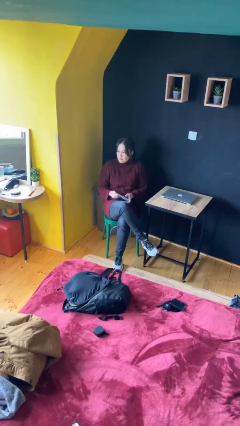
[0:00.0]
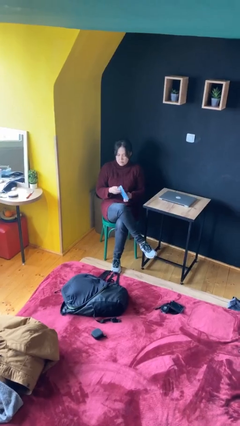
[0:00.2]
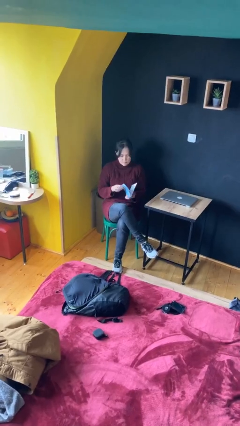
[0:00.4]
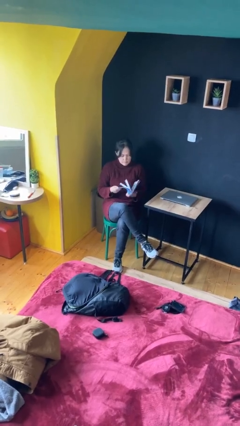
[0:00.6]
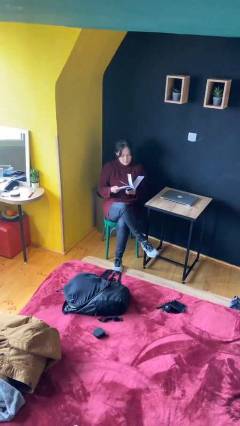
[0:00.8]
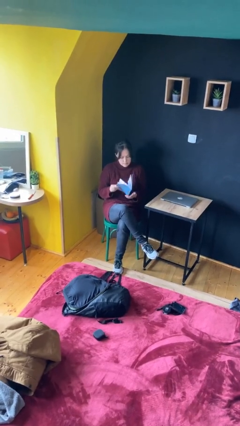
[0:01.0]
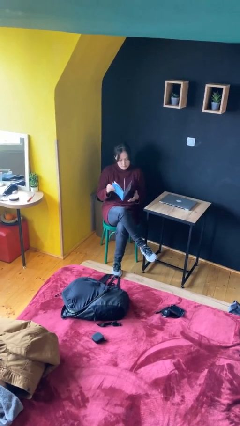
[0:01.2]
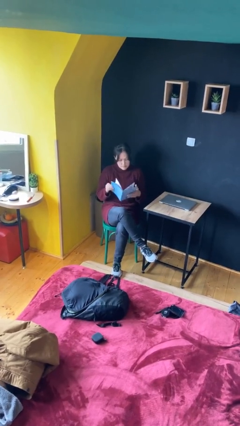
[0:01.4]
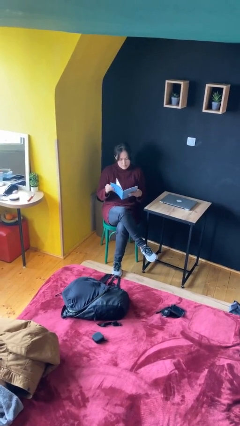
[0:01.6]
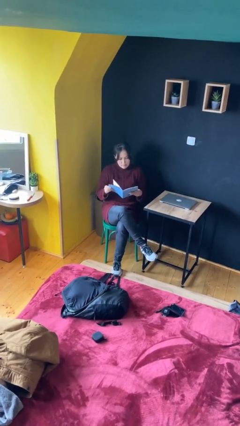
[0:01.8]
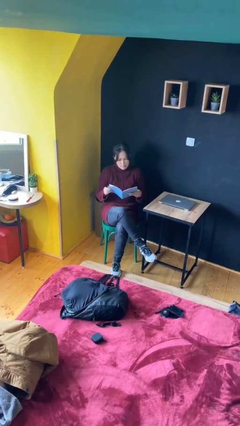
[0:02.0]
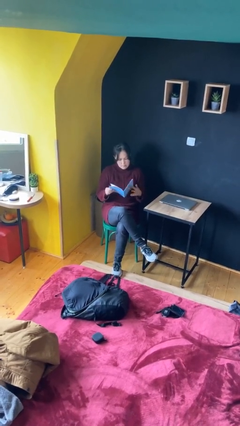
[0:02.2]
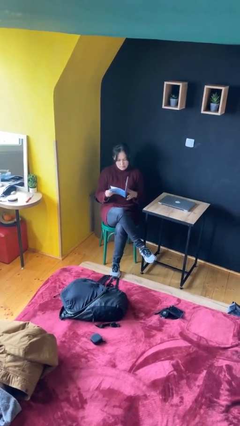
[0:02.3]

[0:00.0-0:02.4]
person reads document

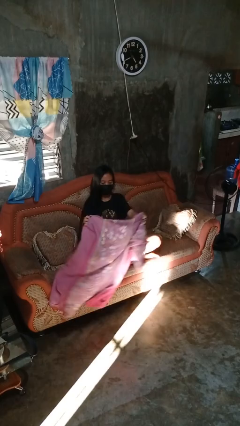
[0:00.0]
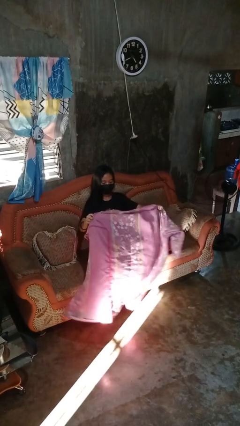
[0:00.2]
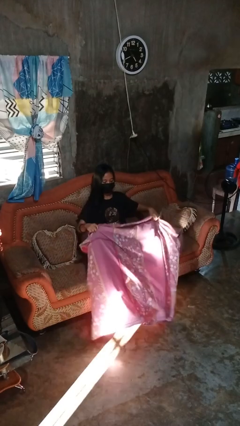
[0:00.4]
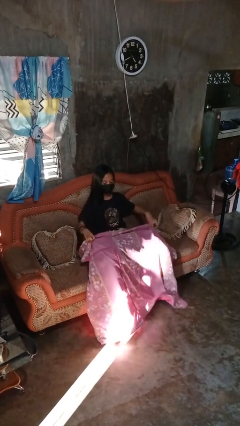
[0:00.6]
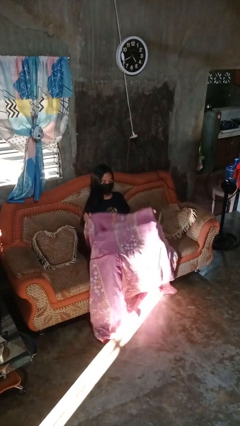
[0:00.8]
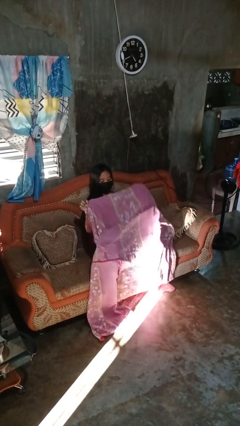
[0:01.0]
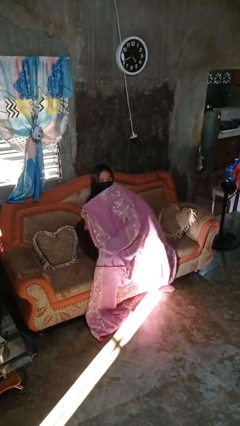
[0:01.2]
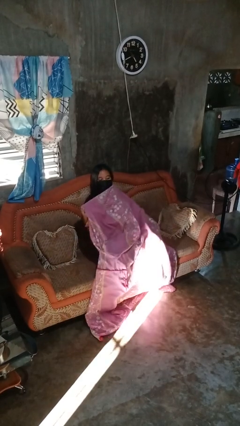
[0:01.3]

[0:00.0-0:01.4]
person covers with blanket

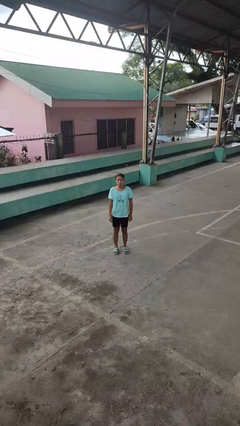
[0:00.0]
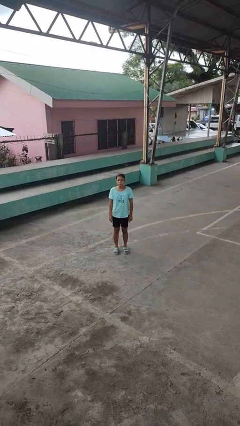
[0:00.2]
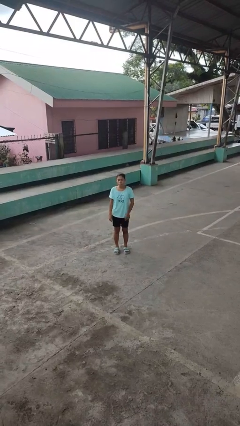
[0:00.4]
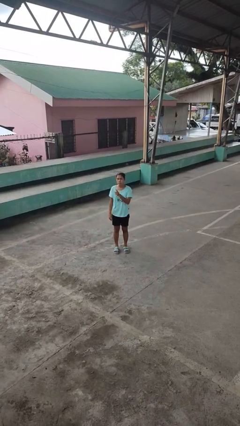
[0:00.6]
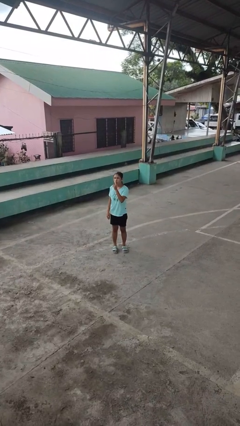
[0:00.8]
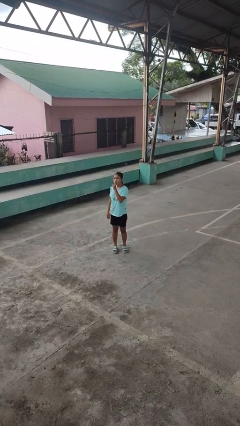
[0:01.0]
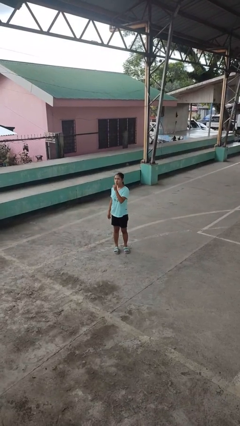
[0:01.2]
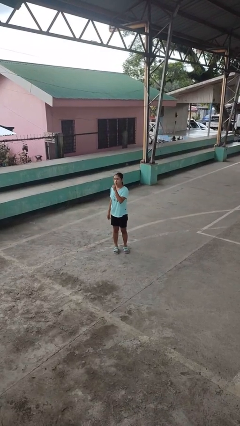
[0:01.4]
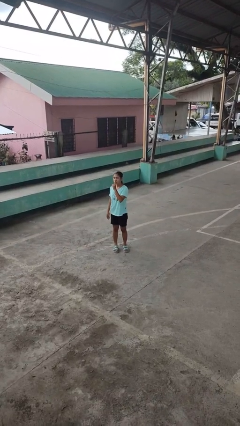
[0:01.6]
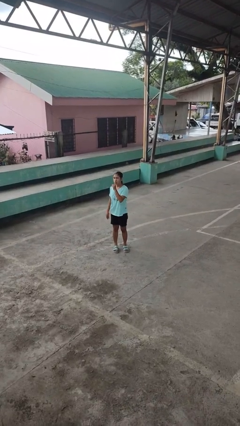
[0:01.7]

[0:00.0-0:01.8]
person gestures be quiet

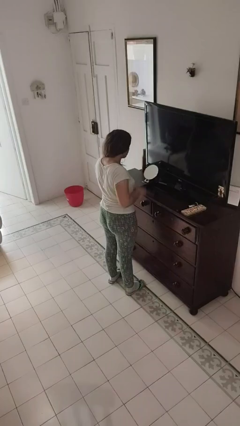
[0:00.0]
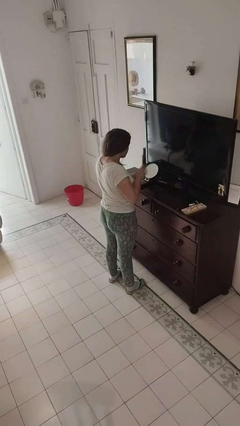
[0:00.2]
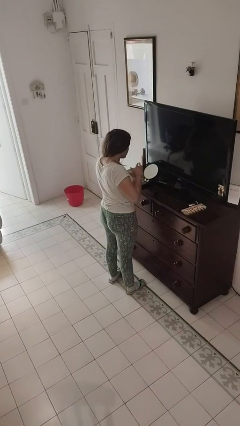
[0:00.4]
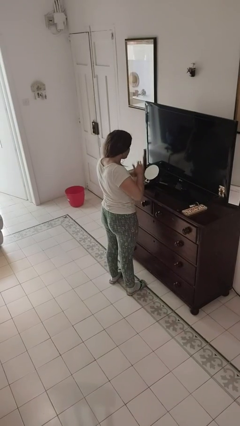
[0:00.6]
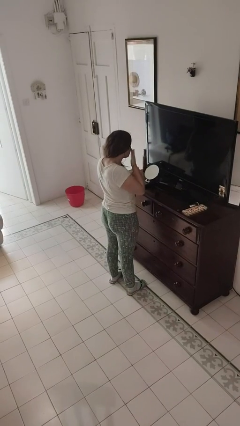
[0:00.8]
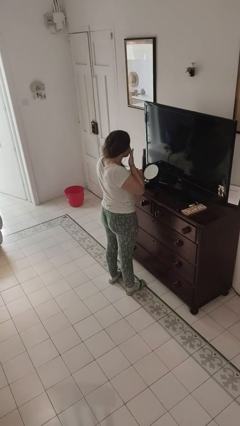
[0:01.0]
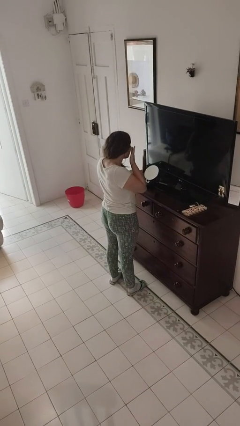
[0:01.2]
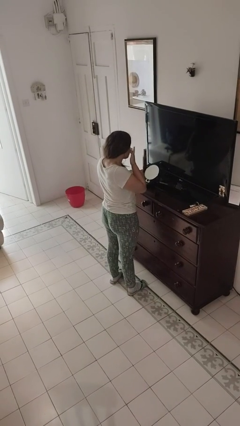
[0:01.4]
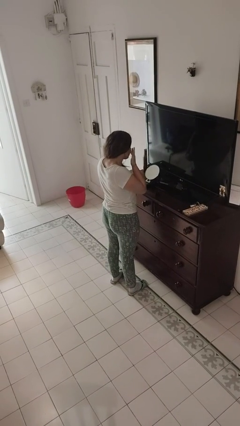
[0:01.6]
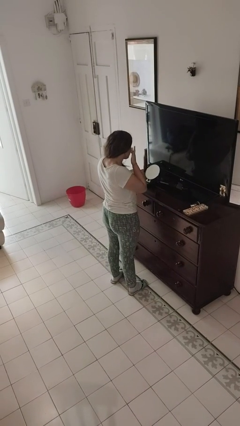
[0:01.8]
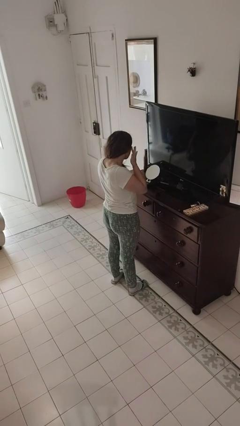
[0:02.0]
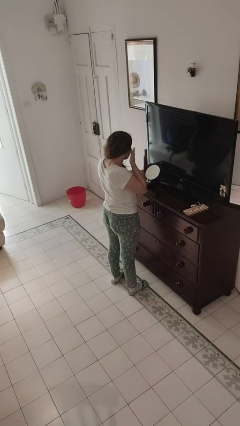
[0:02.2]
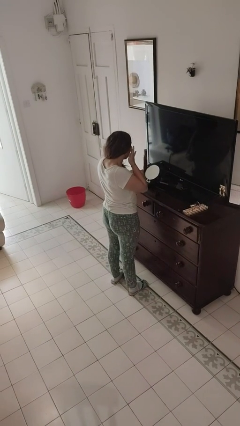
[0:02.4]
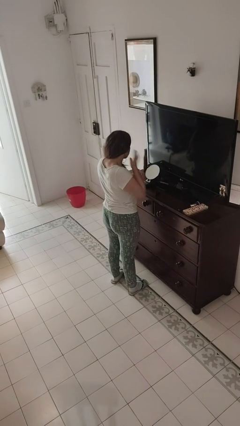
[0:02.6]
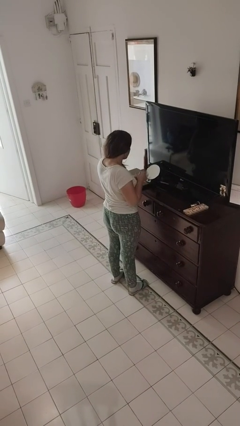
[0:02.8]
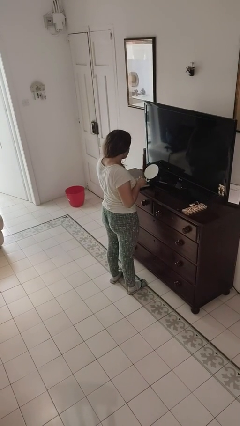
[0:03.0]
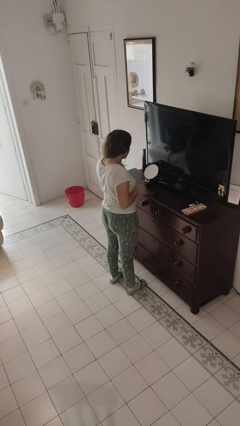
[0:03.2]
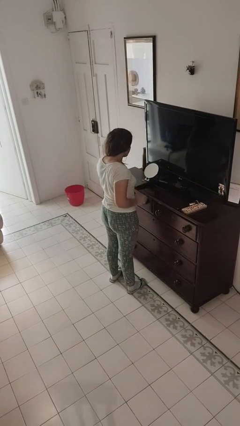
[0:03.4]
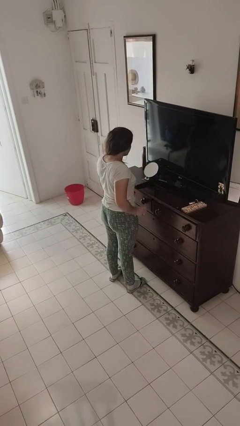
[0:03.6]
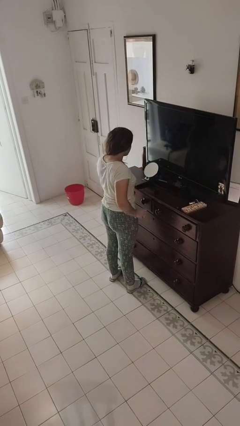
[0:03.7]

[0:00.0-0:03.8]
person applies foundation makeup

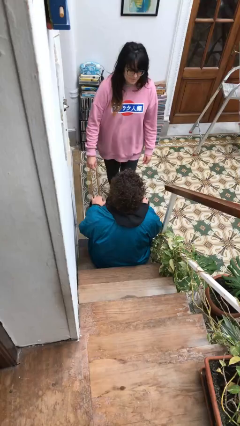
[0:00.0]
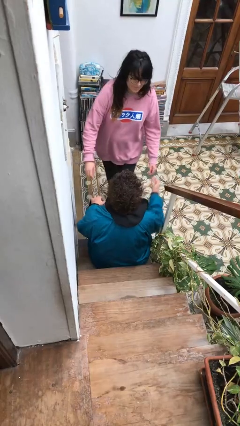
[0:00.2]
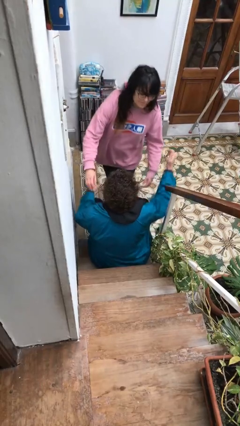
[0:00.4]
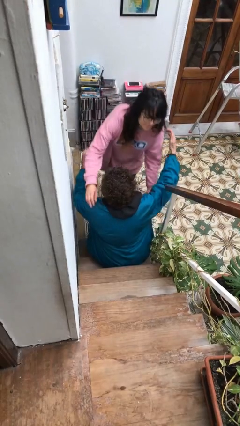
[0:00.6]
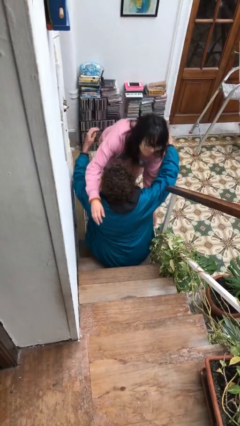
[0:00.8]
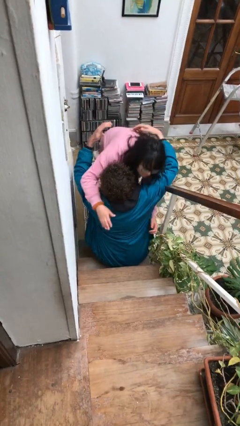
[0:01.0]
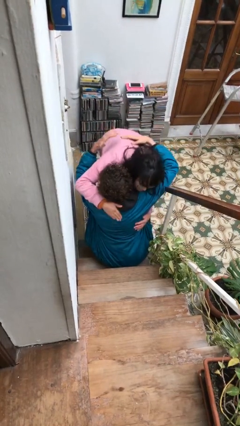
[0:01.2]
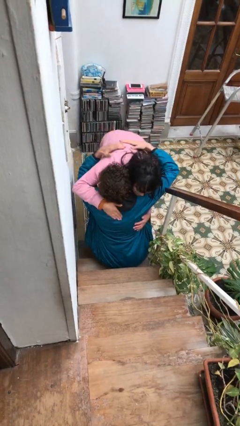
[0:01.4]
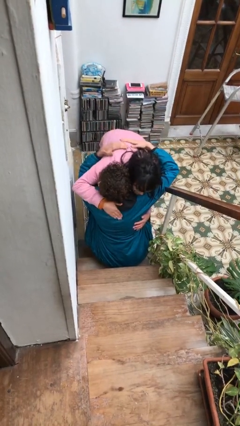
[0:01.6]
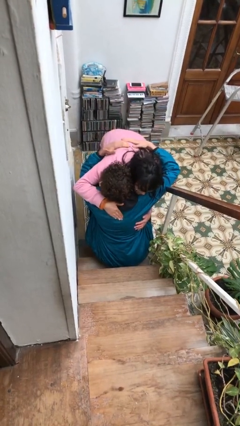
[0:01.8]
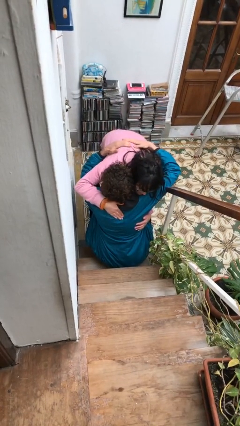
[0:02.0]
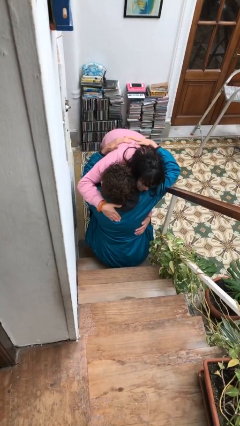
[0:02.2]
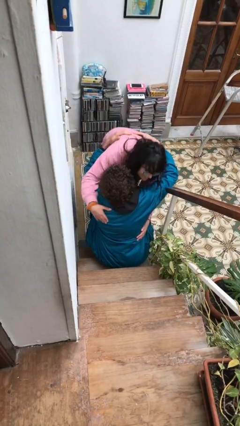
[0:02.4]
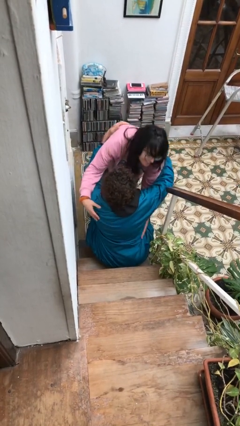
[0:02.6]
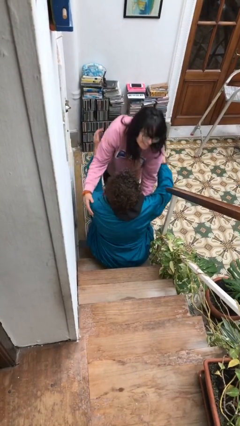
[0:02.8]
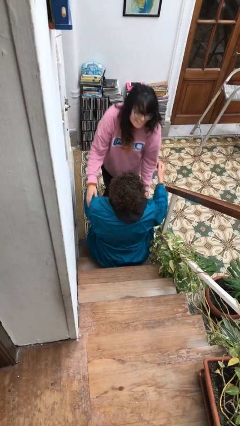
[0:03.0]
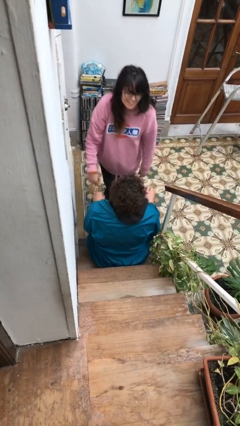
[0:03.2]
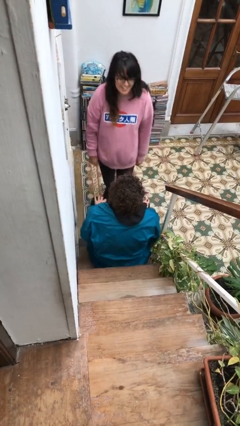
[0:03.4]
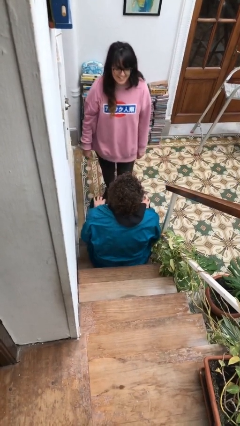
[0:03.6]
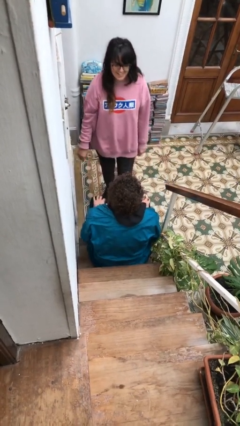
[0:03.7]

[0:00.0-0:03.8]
person embraces person

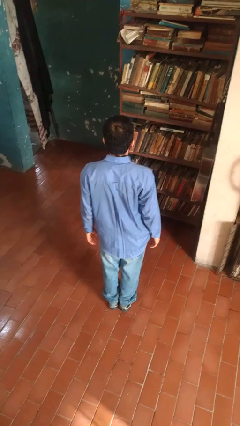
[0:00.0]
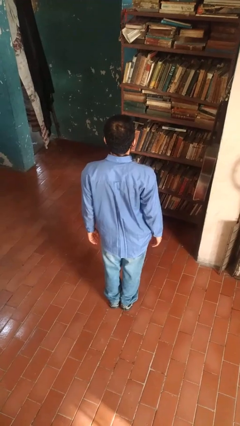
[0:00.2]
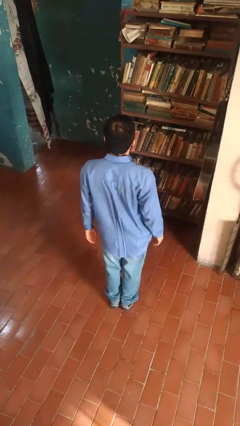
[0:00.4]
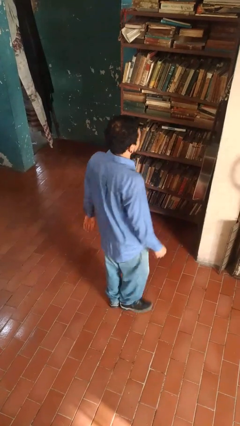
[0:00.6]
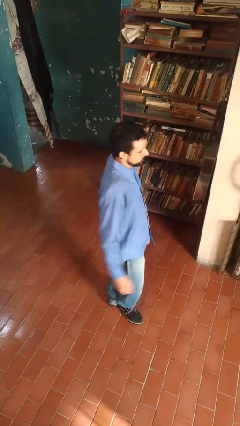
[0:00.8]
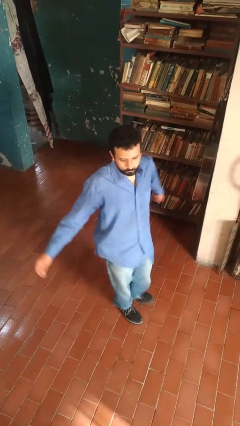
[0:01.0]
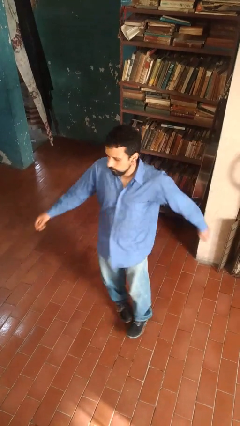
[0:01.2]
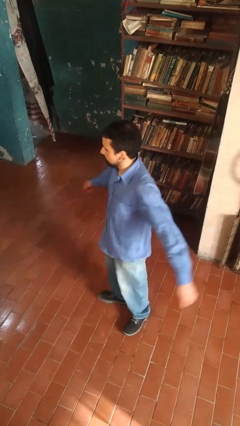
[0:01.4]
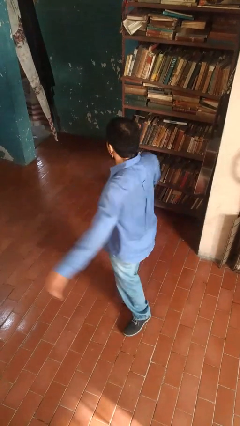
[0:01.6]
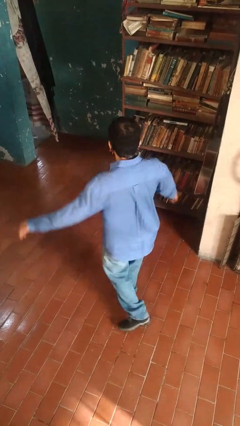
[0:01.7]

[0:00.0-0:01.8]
person twirls

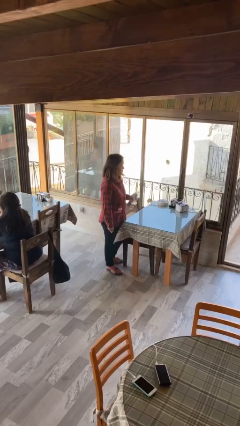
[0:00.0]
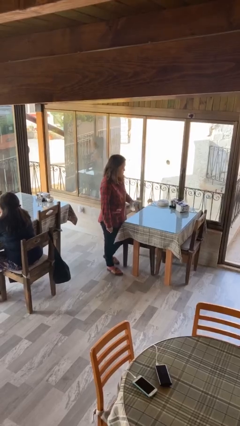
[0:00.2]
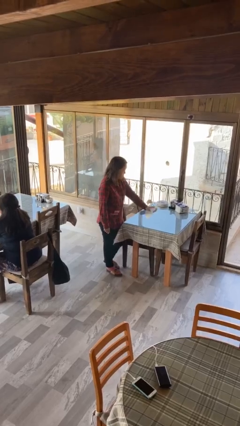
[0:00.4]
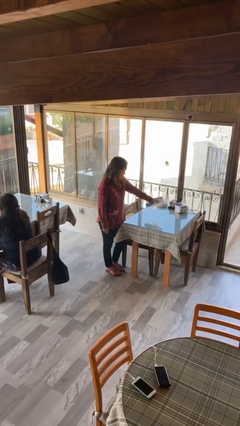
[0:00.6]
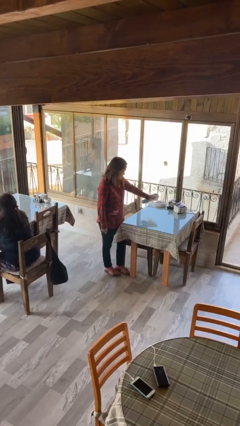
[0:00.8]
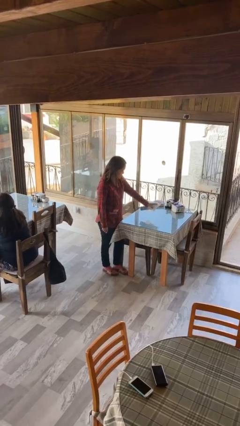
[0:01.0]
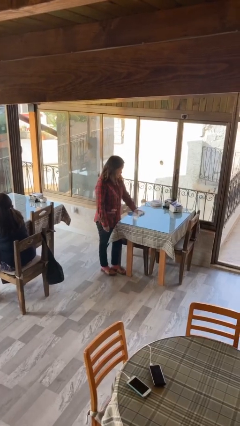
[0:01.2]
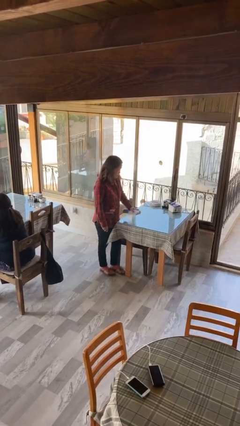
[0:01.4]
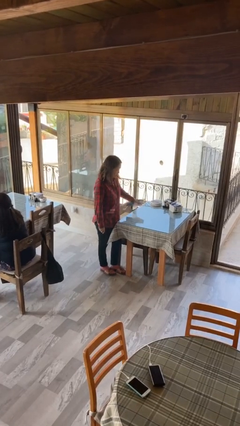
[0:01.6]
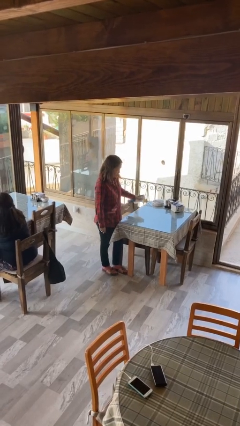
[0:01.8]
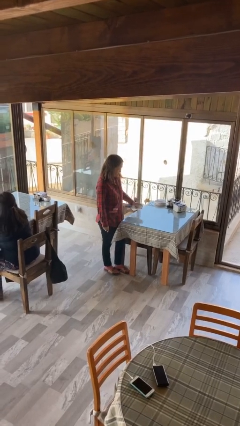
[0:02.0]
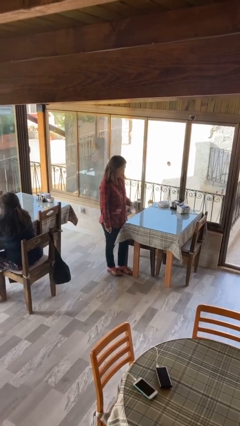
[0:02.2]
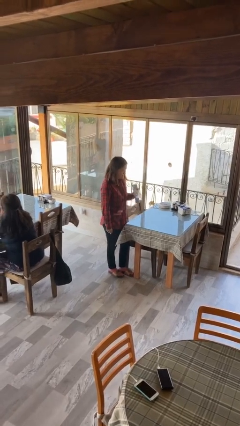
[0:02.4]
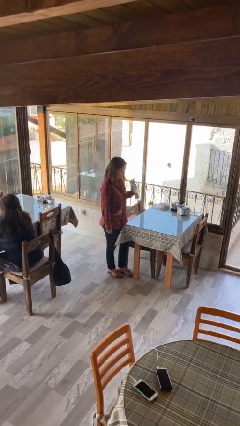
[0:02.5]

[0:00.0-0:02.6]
person sprays from bottle
